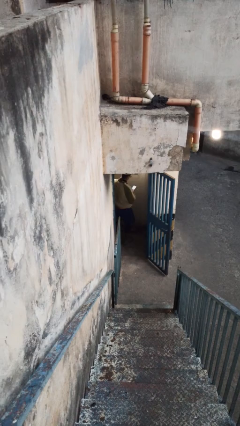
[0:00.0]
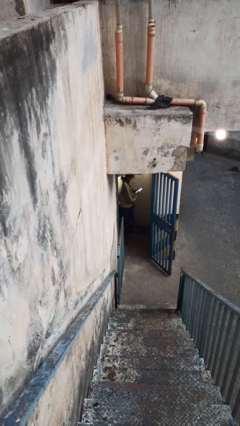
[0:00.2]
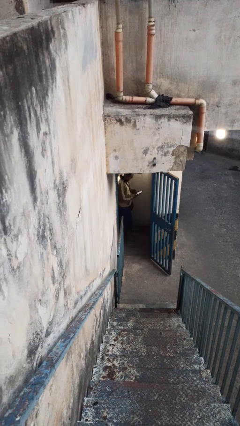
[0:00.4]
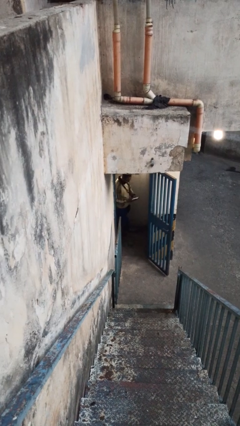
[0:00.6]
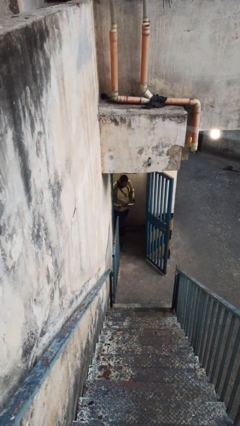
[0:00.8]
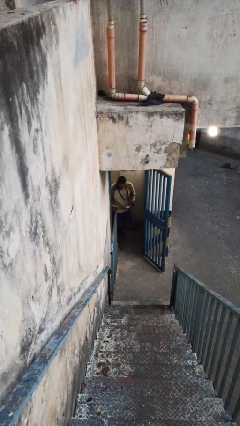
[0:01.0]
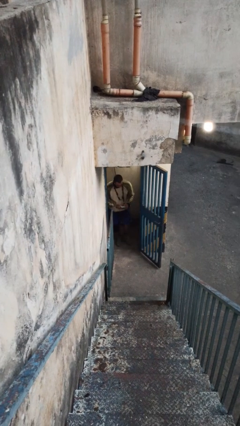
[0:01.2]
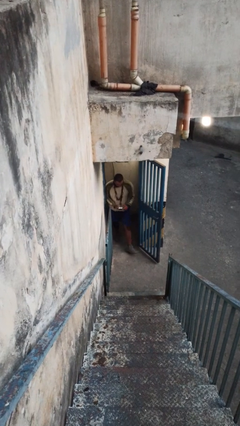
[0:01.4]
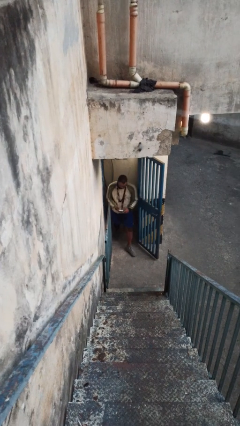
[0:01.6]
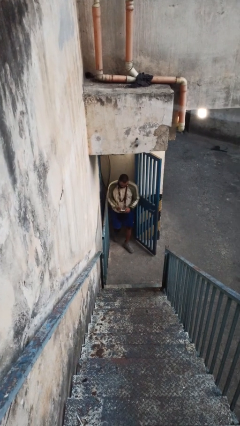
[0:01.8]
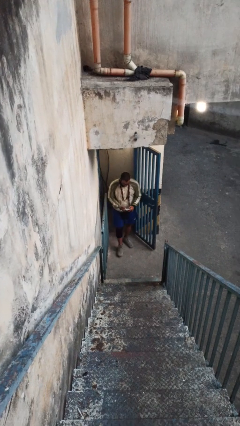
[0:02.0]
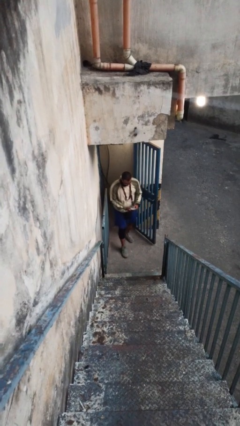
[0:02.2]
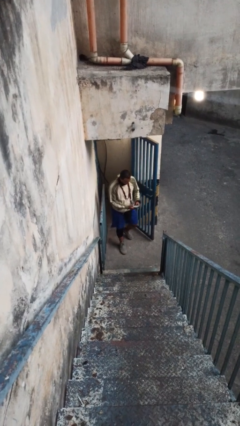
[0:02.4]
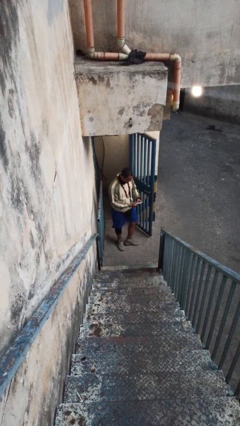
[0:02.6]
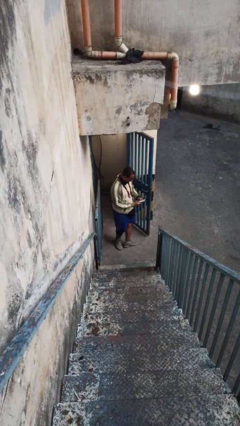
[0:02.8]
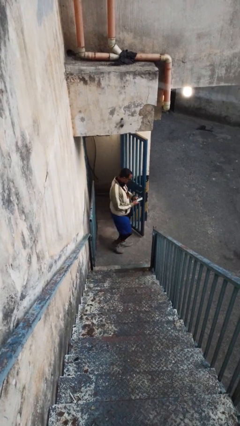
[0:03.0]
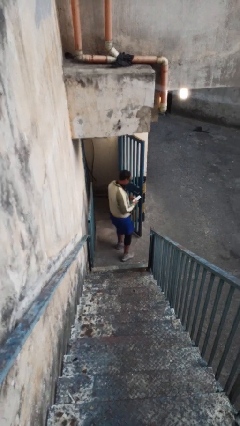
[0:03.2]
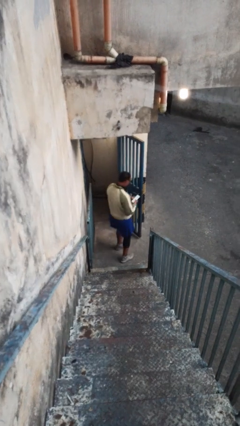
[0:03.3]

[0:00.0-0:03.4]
person enters scene through structure

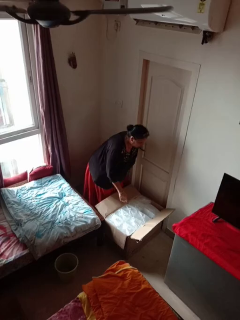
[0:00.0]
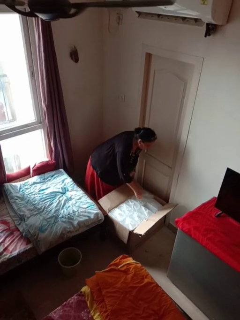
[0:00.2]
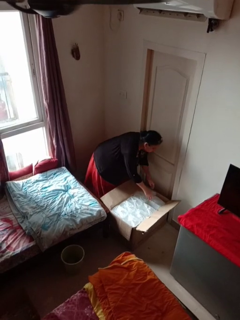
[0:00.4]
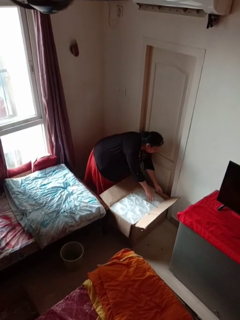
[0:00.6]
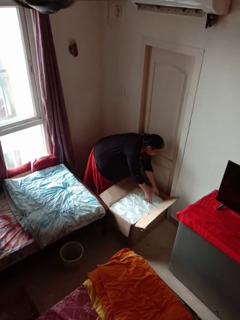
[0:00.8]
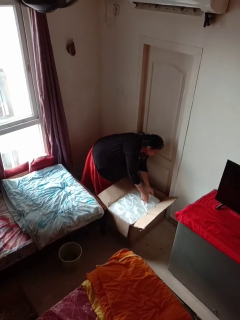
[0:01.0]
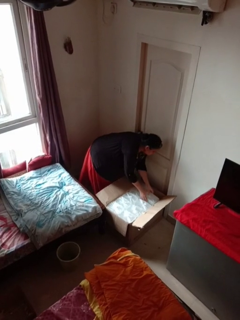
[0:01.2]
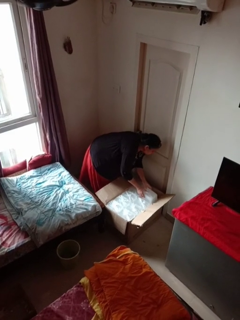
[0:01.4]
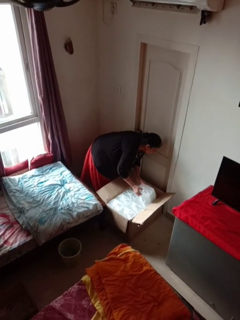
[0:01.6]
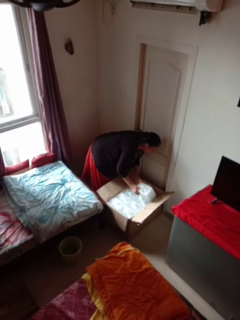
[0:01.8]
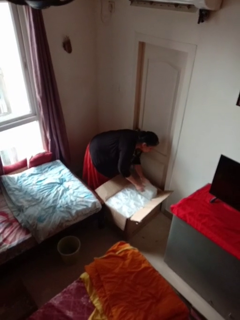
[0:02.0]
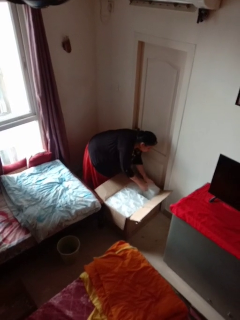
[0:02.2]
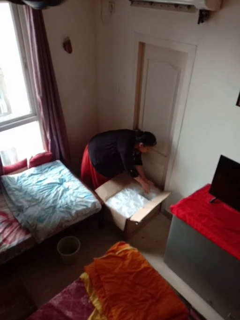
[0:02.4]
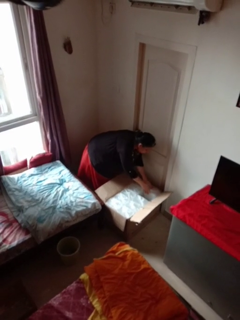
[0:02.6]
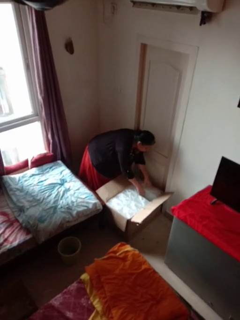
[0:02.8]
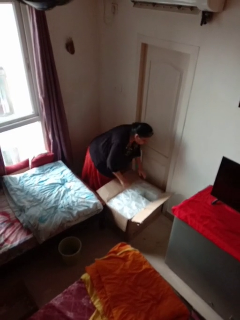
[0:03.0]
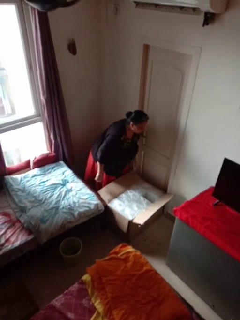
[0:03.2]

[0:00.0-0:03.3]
person searches in box

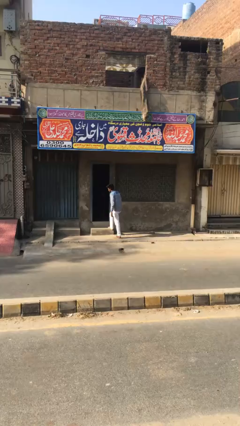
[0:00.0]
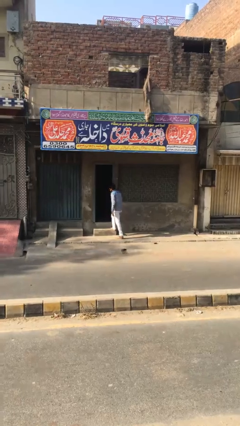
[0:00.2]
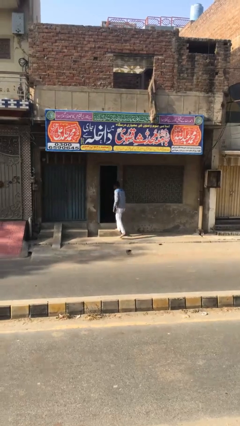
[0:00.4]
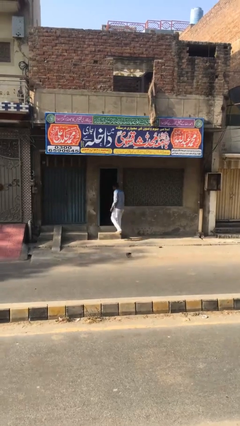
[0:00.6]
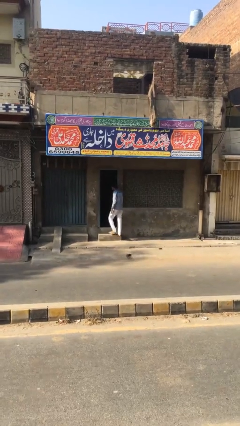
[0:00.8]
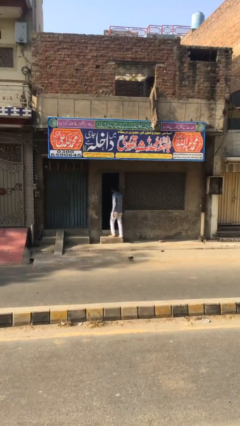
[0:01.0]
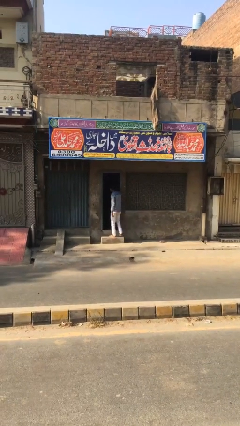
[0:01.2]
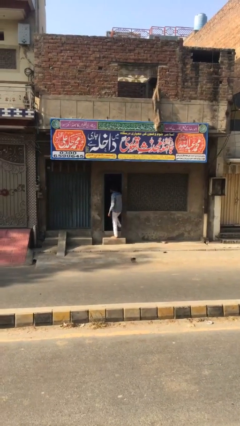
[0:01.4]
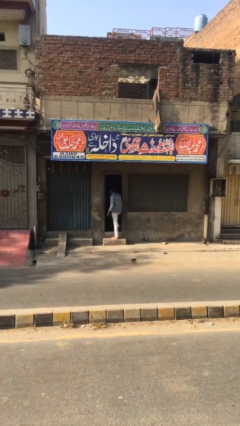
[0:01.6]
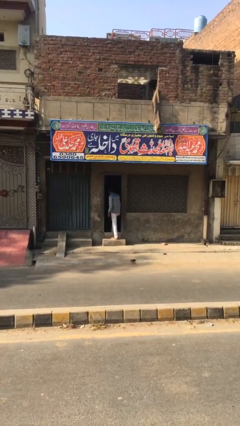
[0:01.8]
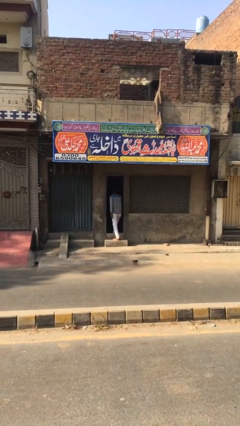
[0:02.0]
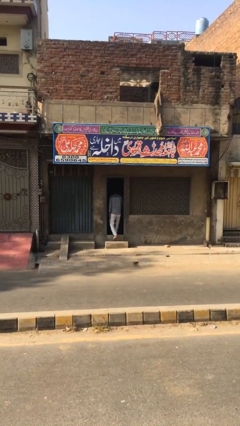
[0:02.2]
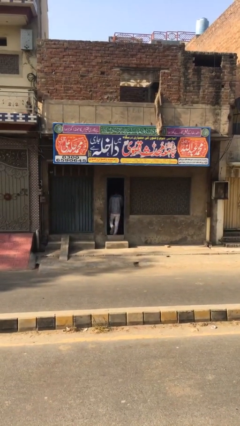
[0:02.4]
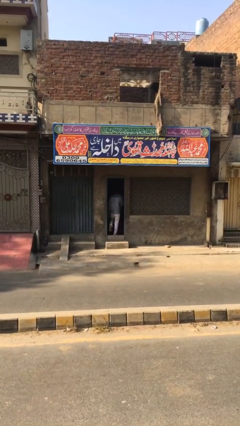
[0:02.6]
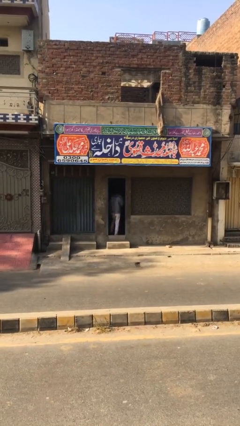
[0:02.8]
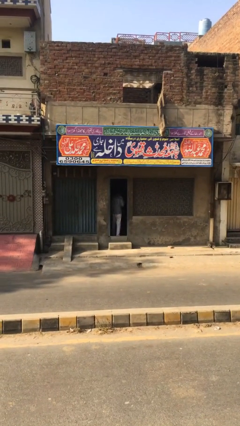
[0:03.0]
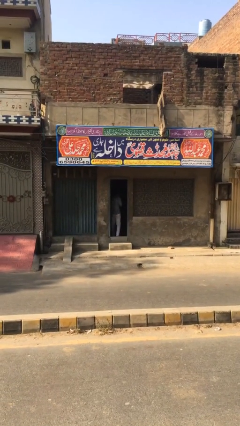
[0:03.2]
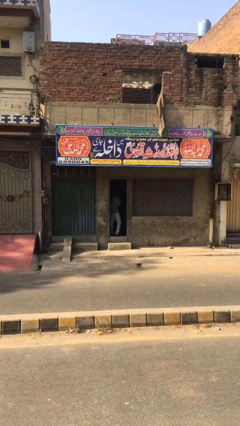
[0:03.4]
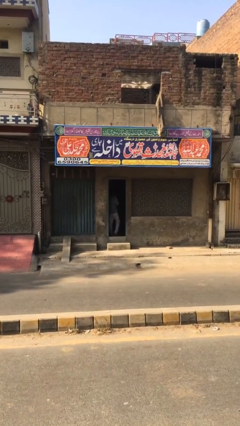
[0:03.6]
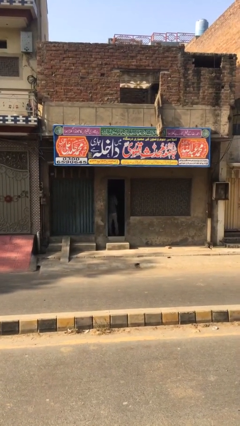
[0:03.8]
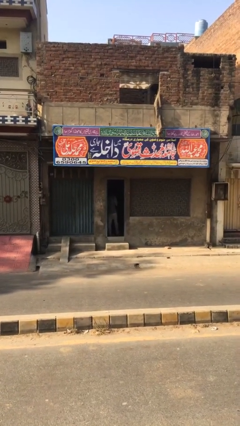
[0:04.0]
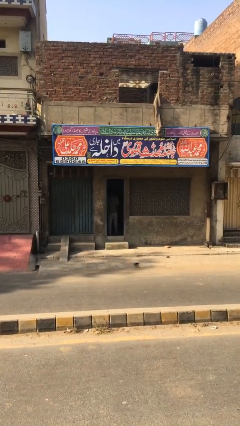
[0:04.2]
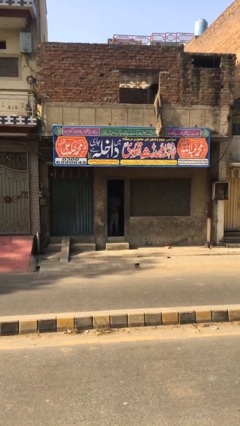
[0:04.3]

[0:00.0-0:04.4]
person exits scene through structure

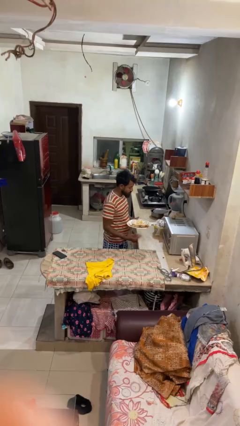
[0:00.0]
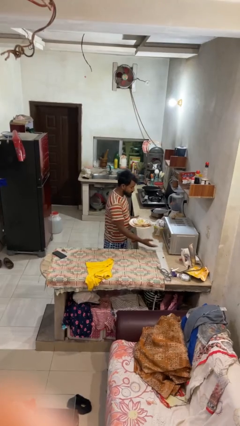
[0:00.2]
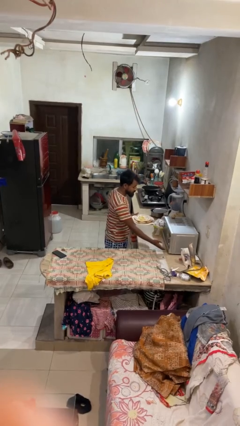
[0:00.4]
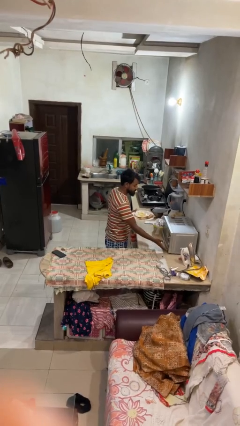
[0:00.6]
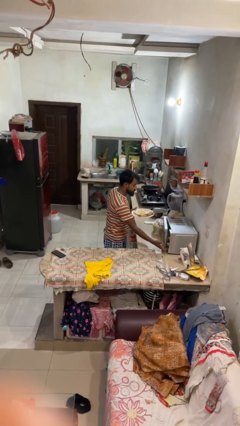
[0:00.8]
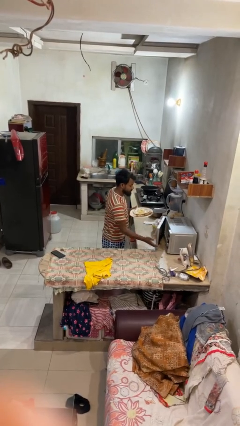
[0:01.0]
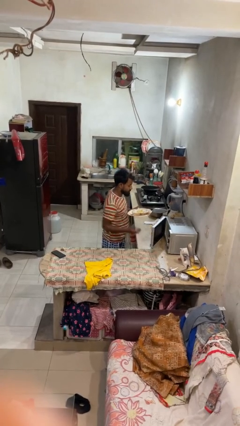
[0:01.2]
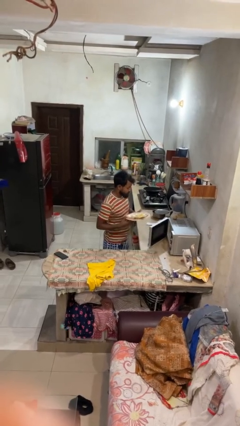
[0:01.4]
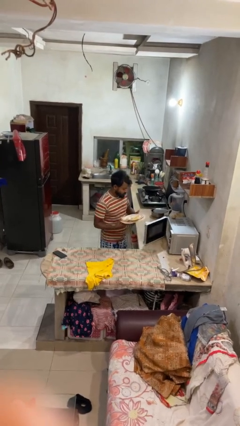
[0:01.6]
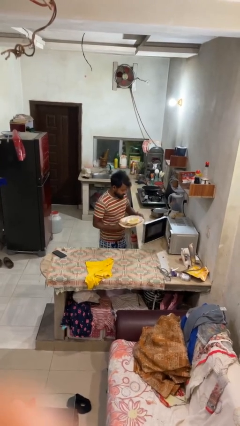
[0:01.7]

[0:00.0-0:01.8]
person opens microwave

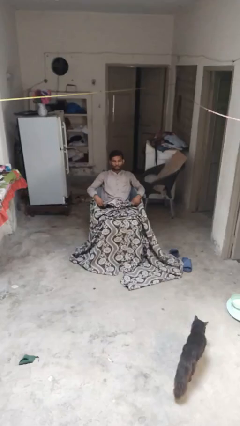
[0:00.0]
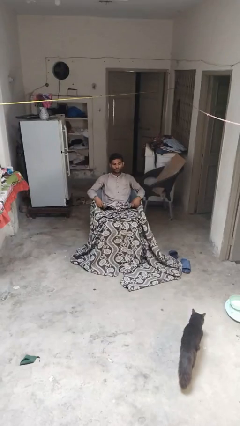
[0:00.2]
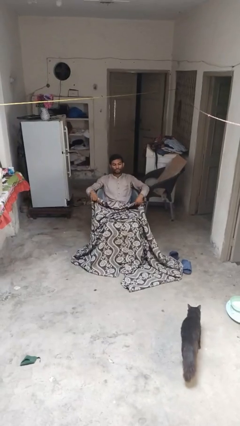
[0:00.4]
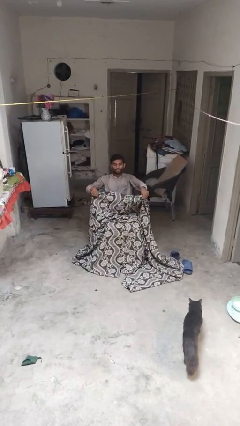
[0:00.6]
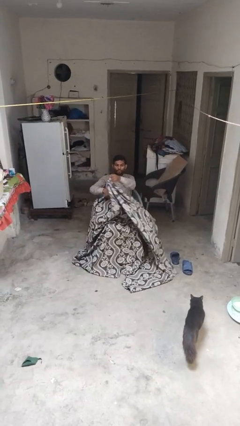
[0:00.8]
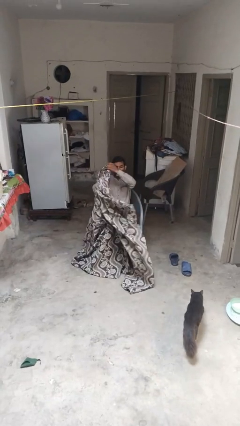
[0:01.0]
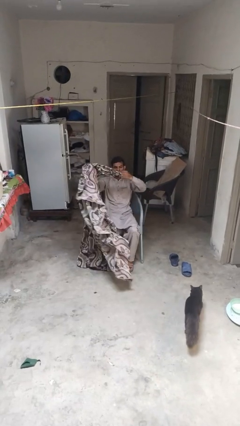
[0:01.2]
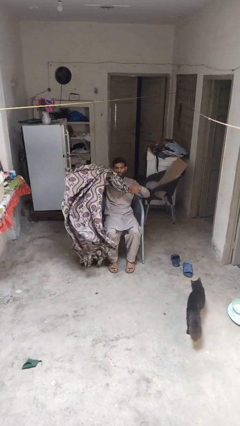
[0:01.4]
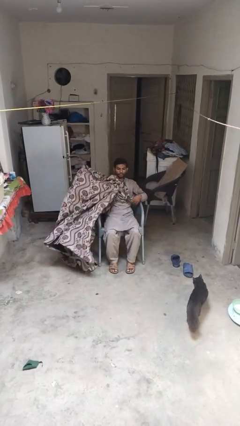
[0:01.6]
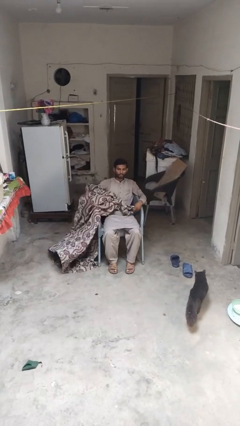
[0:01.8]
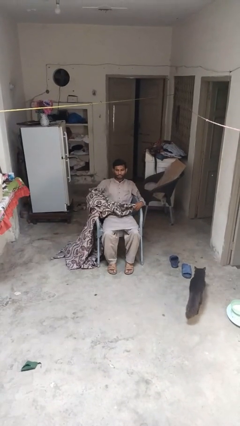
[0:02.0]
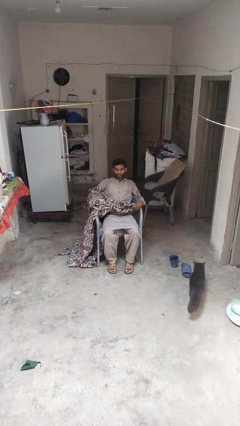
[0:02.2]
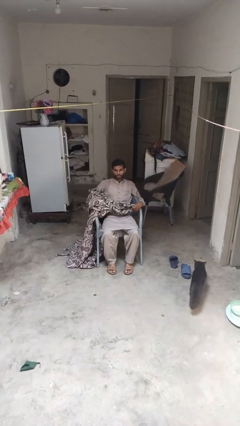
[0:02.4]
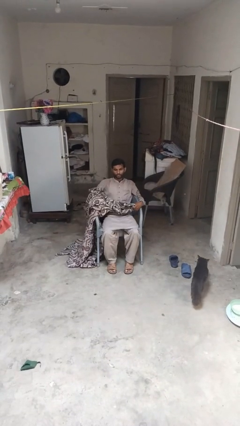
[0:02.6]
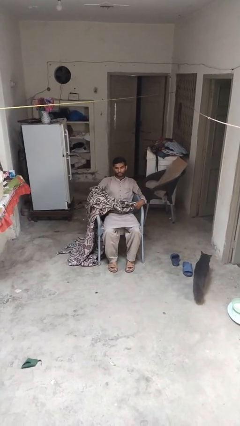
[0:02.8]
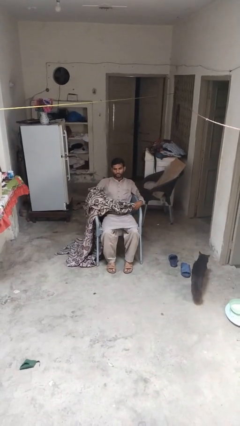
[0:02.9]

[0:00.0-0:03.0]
person uncovers with blanket

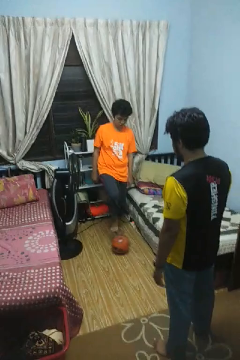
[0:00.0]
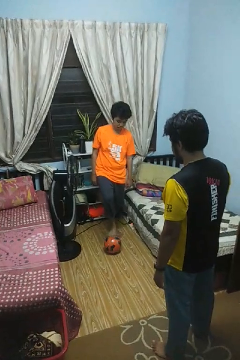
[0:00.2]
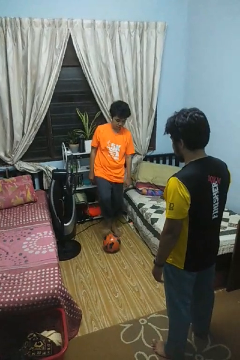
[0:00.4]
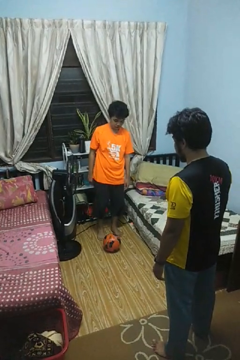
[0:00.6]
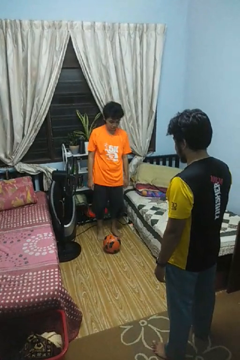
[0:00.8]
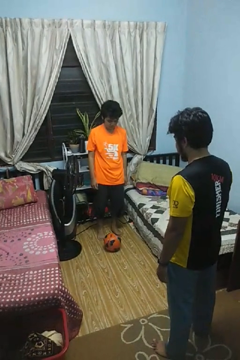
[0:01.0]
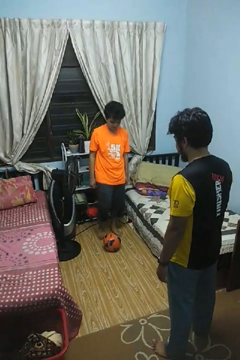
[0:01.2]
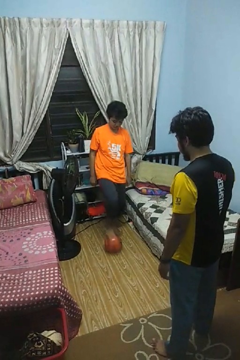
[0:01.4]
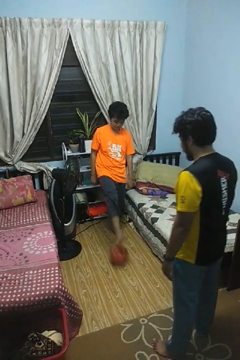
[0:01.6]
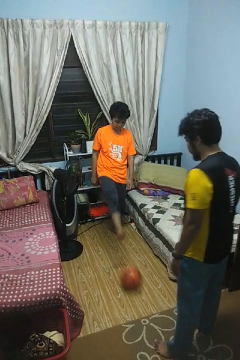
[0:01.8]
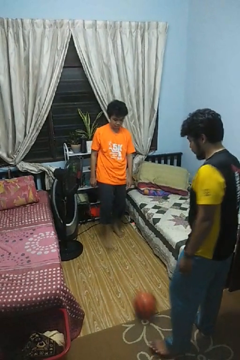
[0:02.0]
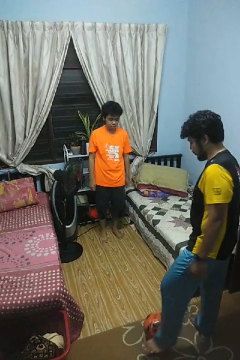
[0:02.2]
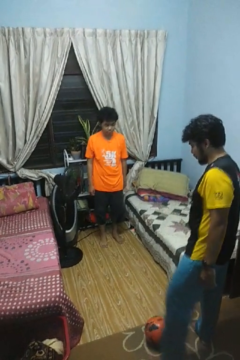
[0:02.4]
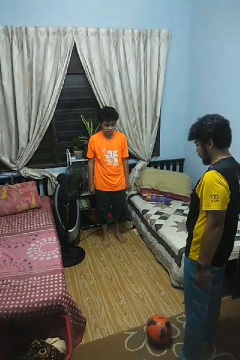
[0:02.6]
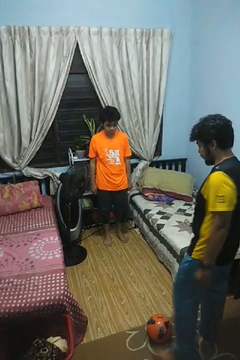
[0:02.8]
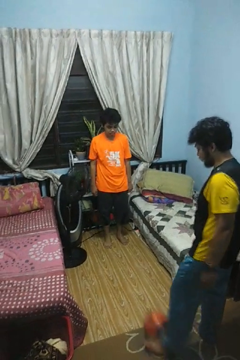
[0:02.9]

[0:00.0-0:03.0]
person kicks object to person
